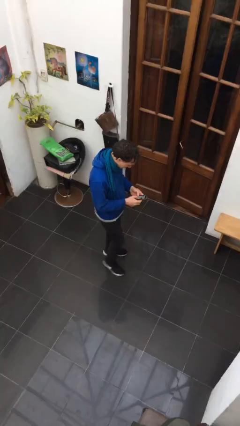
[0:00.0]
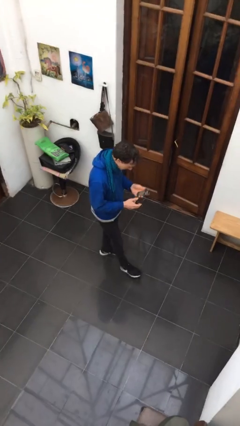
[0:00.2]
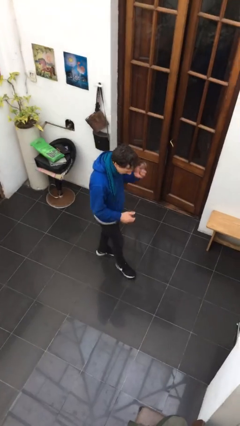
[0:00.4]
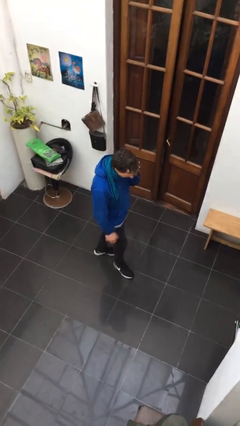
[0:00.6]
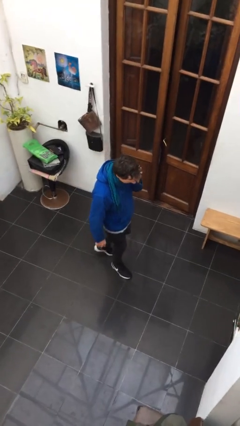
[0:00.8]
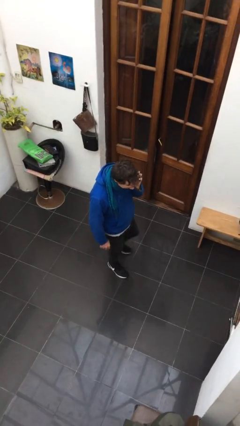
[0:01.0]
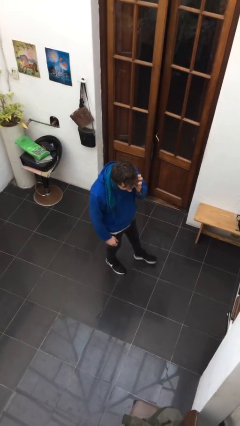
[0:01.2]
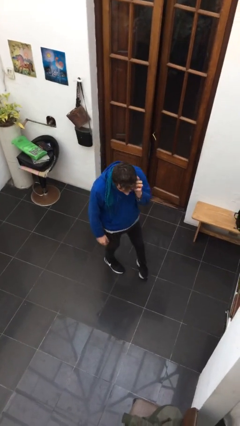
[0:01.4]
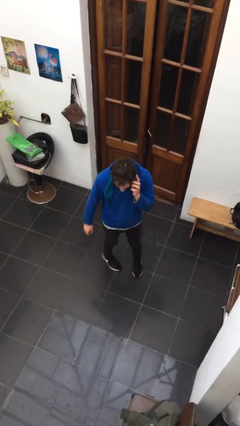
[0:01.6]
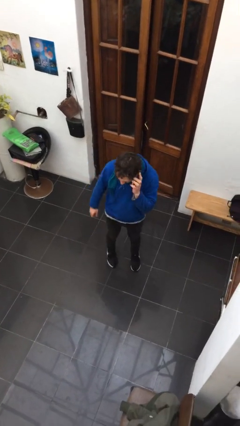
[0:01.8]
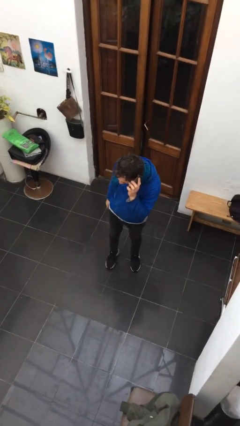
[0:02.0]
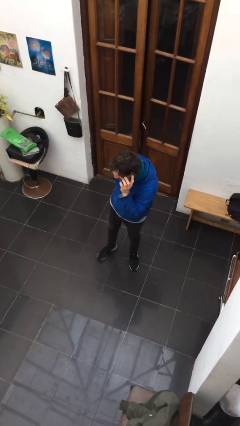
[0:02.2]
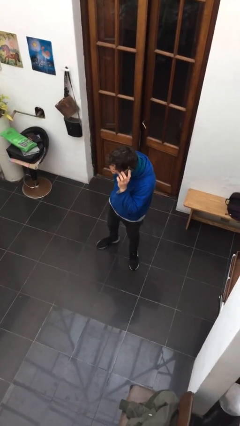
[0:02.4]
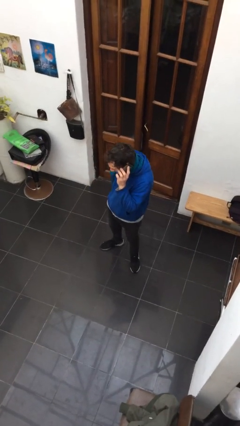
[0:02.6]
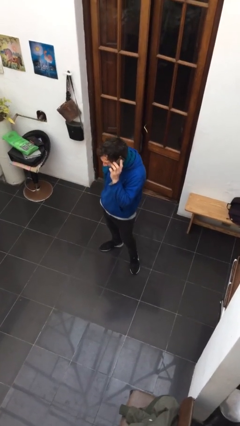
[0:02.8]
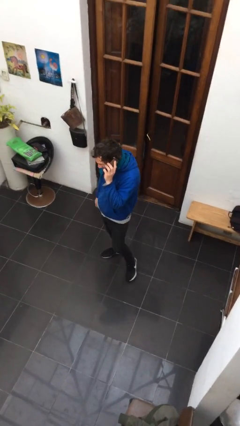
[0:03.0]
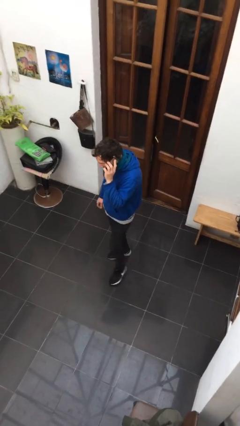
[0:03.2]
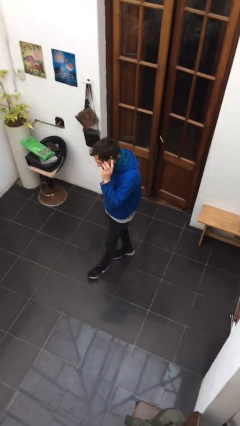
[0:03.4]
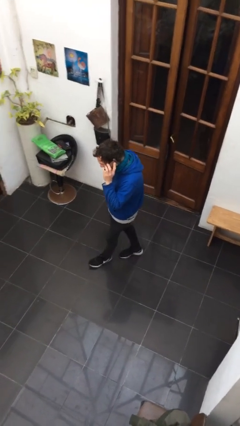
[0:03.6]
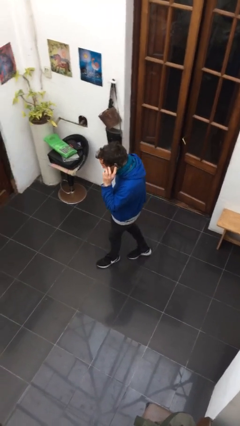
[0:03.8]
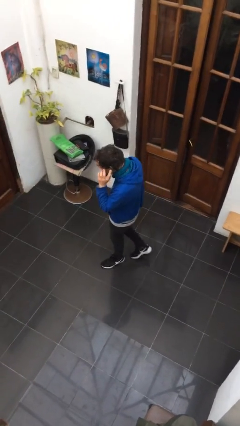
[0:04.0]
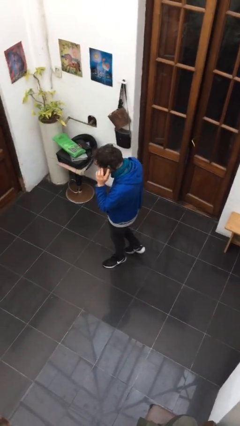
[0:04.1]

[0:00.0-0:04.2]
person talks on phone

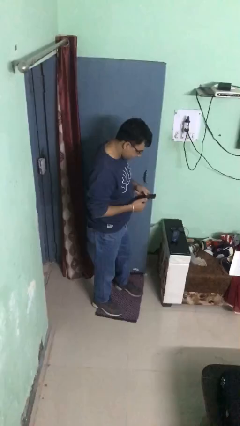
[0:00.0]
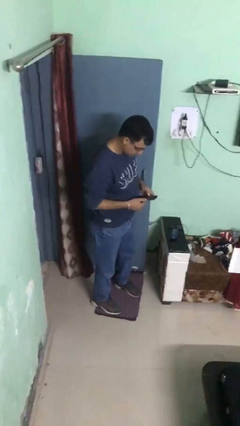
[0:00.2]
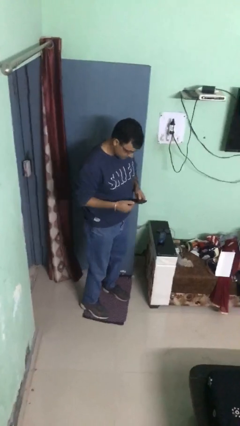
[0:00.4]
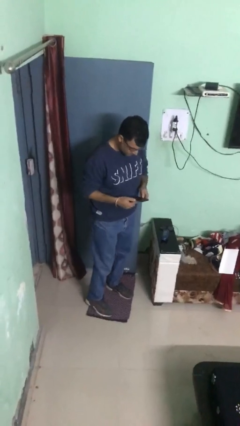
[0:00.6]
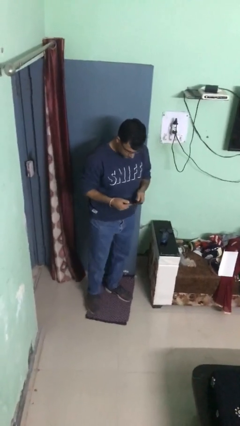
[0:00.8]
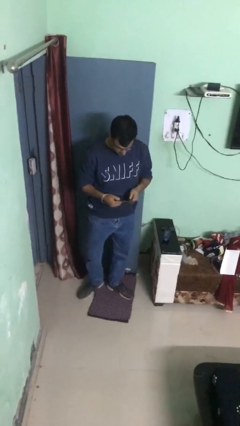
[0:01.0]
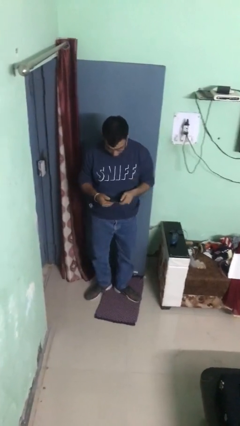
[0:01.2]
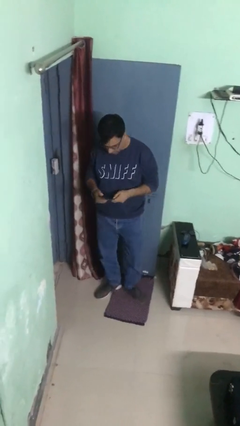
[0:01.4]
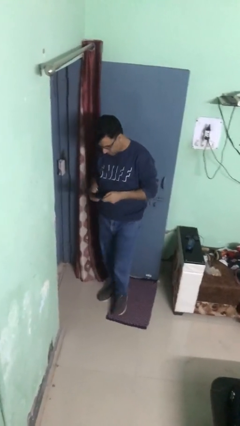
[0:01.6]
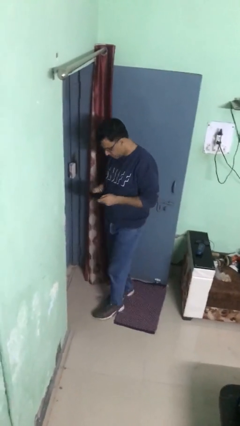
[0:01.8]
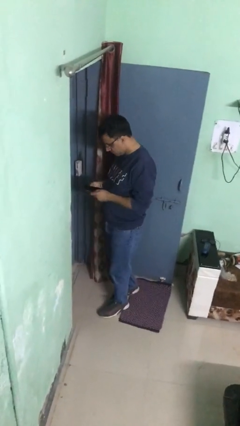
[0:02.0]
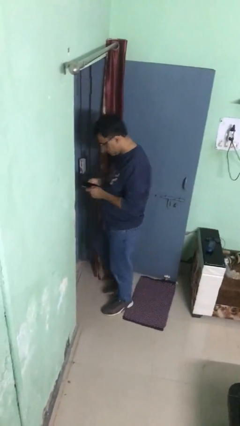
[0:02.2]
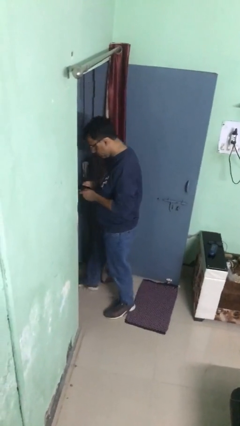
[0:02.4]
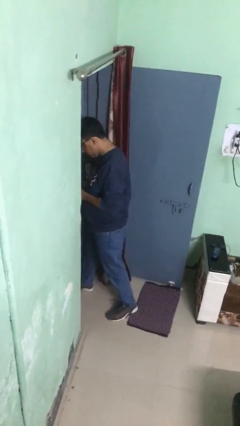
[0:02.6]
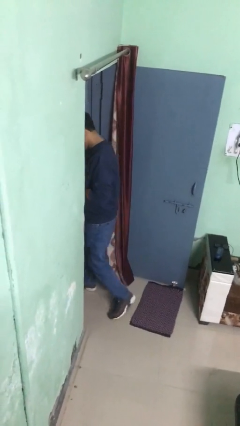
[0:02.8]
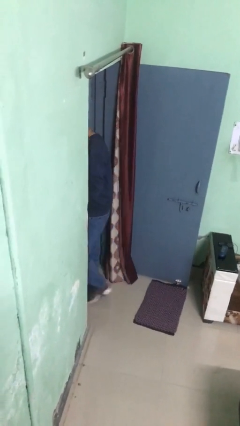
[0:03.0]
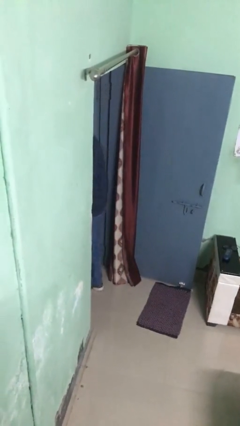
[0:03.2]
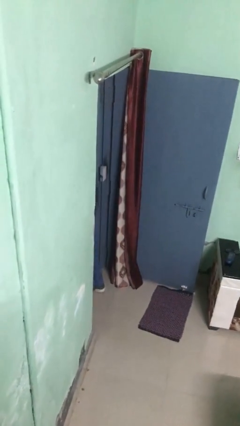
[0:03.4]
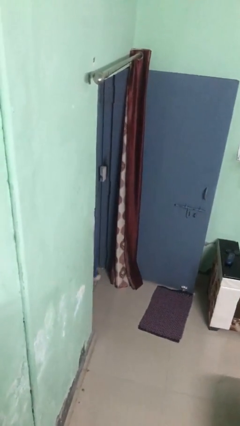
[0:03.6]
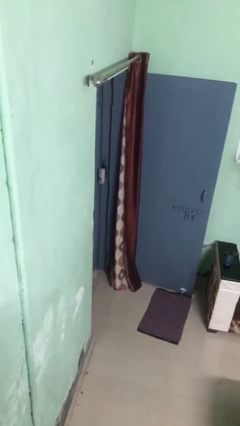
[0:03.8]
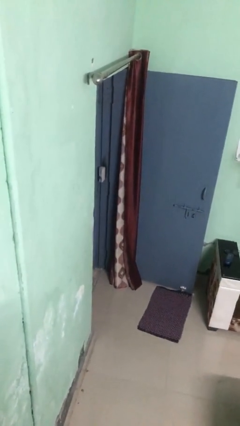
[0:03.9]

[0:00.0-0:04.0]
person exits scene through structure

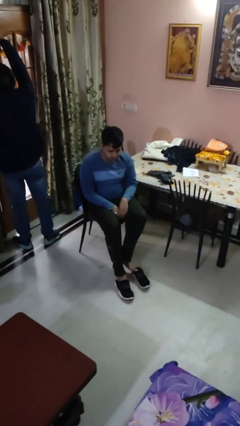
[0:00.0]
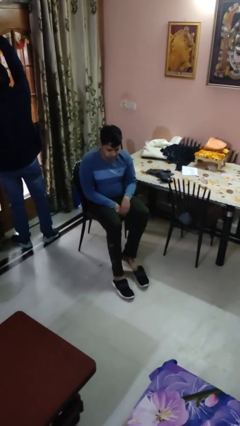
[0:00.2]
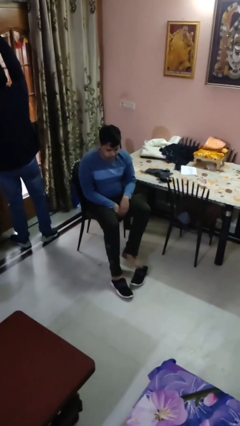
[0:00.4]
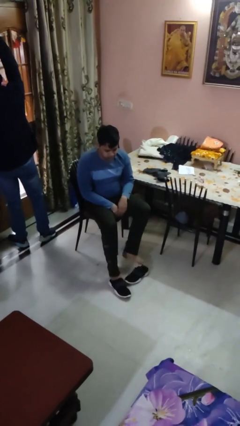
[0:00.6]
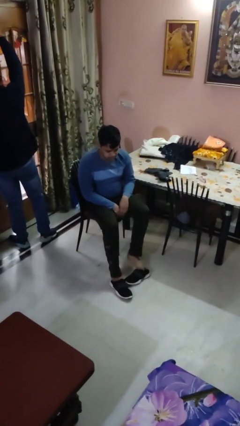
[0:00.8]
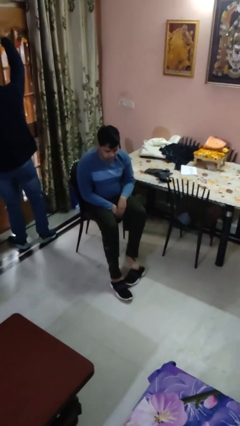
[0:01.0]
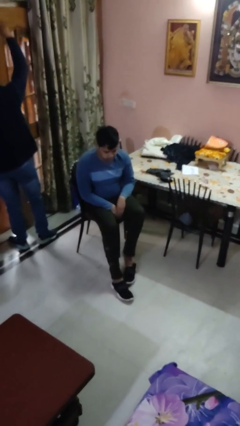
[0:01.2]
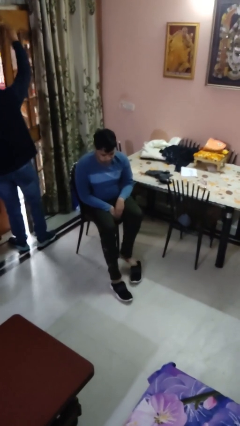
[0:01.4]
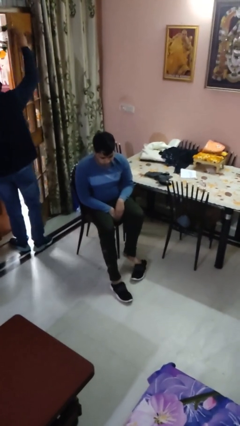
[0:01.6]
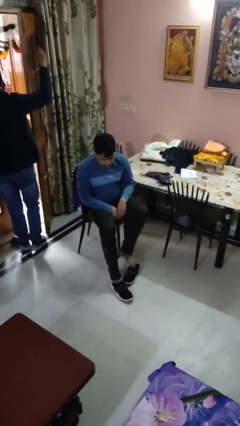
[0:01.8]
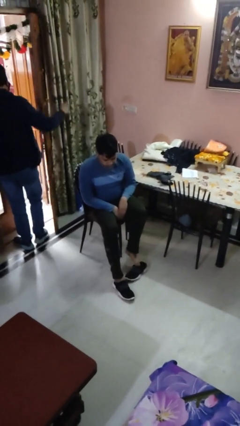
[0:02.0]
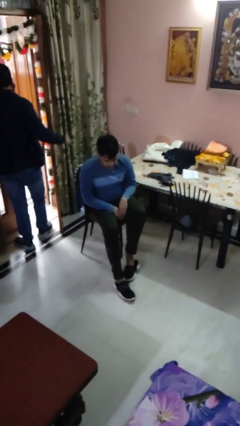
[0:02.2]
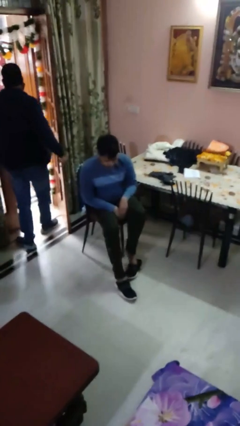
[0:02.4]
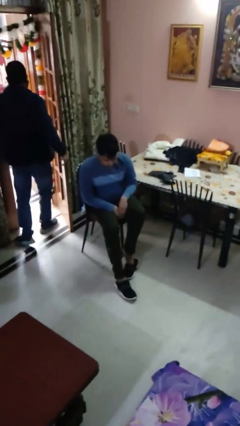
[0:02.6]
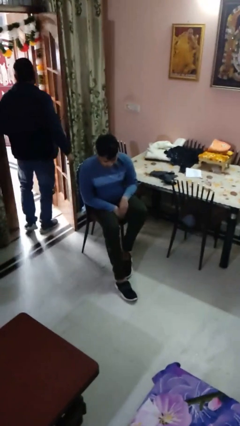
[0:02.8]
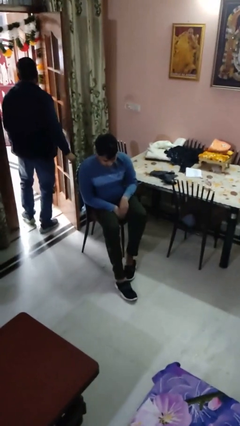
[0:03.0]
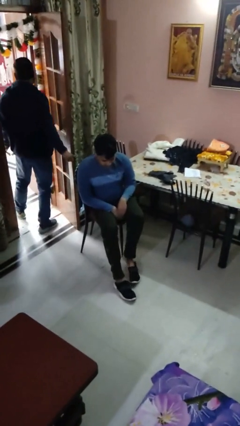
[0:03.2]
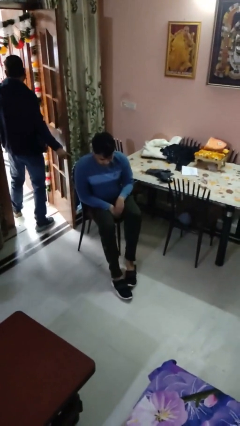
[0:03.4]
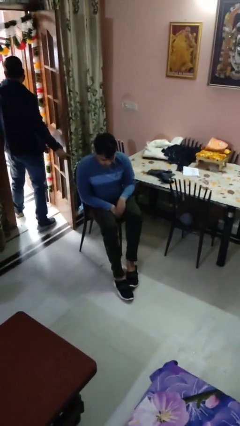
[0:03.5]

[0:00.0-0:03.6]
person puts on shoes

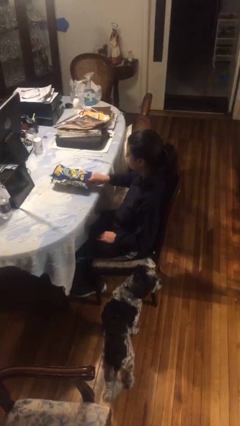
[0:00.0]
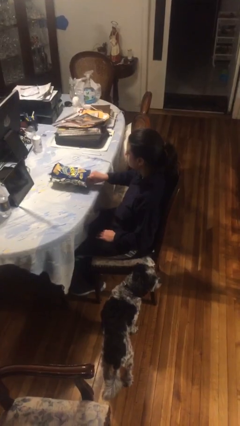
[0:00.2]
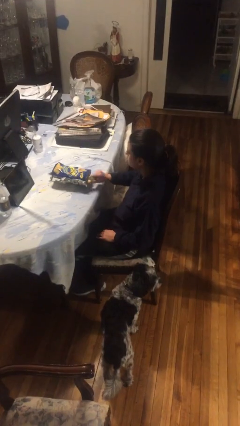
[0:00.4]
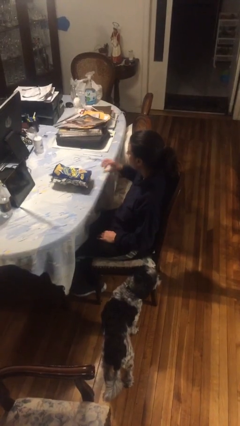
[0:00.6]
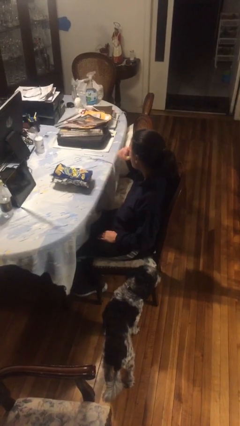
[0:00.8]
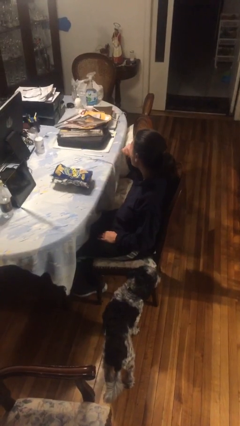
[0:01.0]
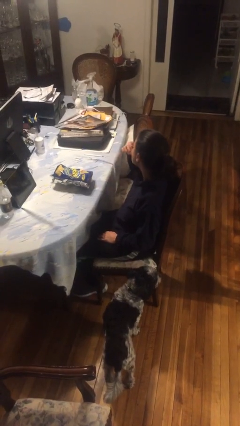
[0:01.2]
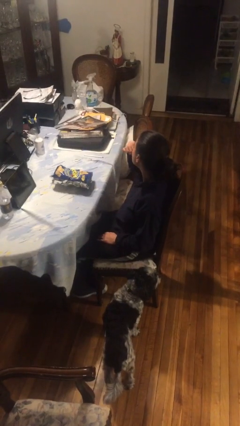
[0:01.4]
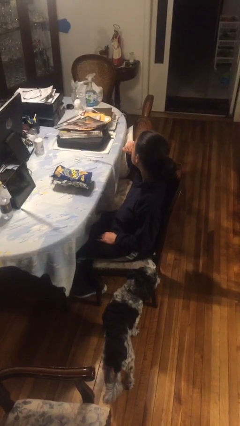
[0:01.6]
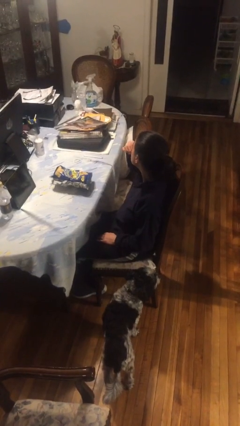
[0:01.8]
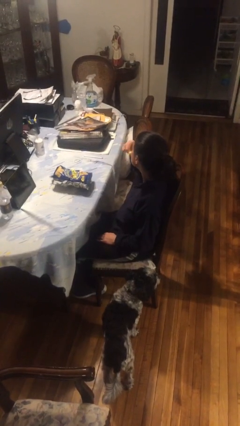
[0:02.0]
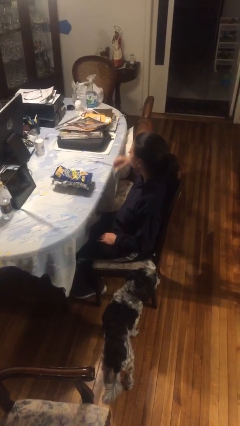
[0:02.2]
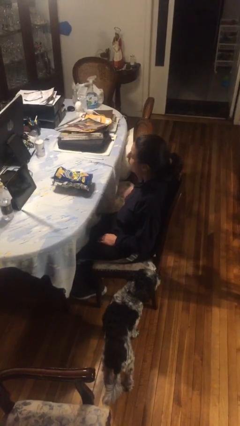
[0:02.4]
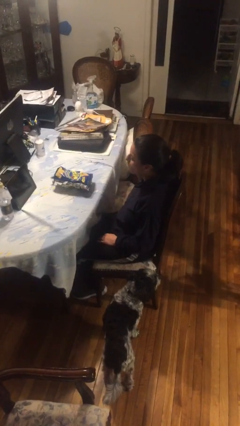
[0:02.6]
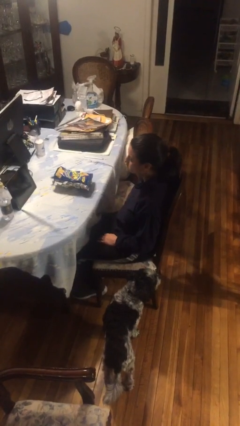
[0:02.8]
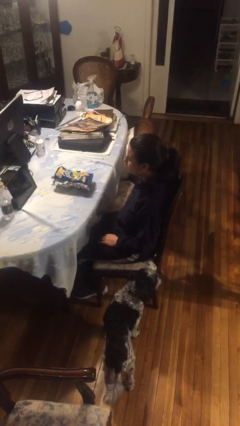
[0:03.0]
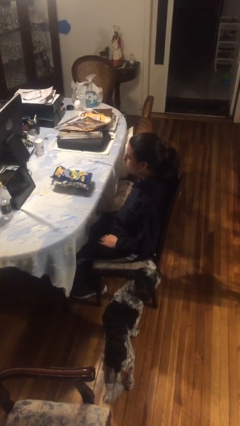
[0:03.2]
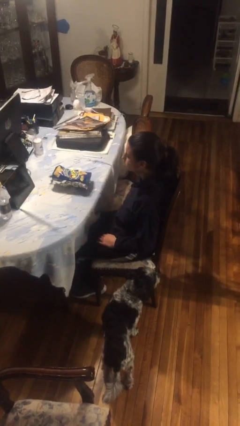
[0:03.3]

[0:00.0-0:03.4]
person eats snack from bag

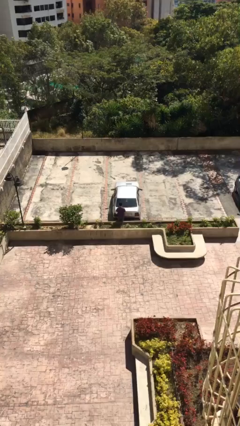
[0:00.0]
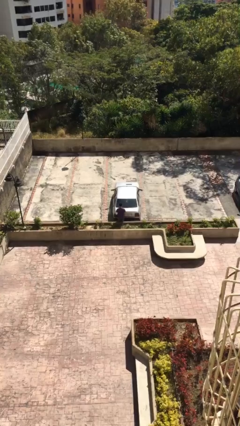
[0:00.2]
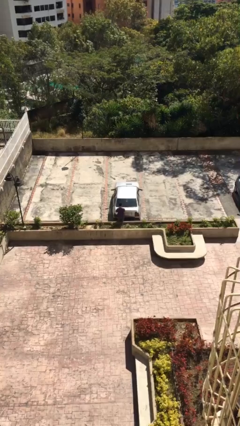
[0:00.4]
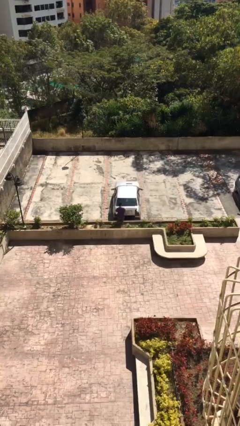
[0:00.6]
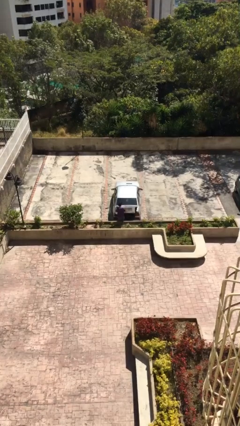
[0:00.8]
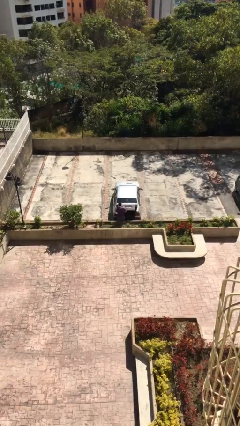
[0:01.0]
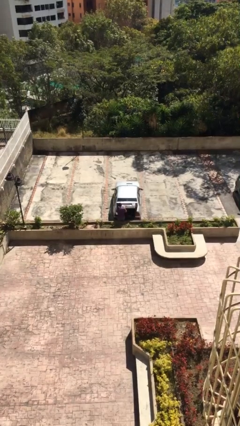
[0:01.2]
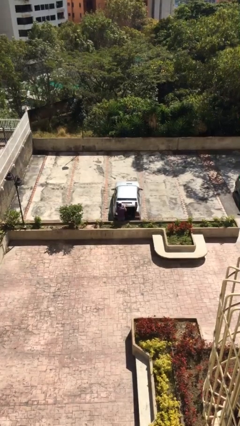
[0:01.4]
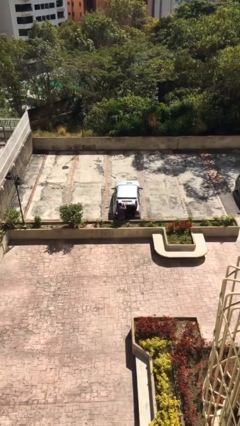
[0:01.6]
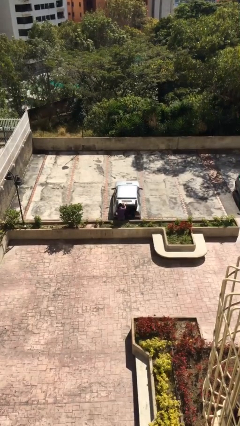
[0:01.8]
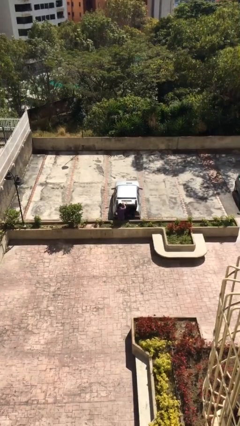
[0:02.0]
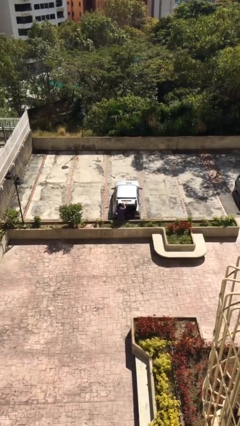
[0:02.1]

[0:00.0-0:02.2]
person opens car trunk

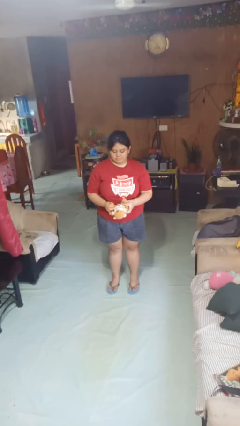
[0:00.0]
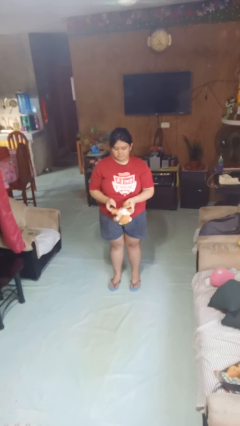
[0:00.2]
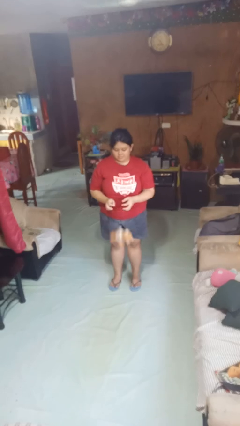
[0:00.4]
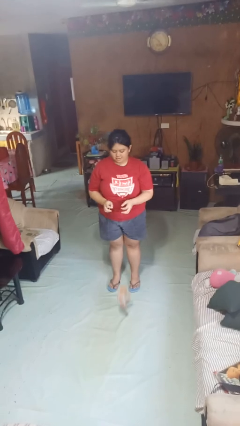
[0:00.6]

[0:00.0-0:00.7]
person drops object
